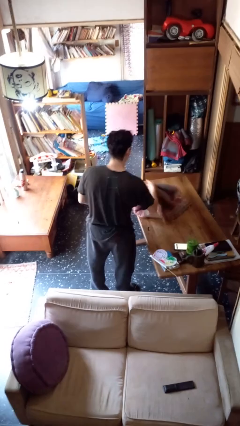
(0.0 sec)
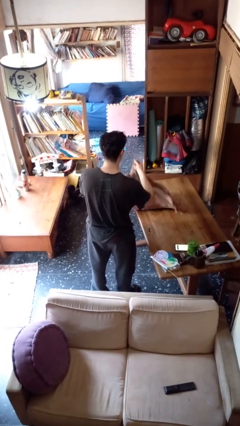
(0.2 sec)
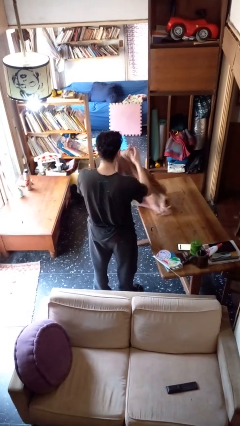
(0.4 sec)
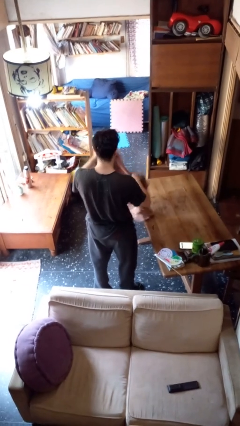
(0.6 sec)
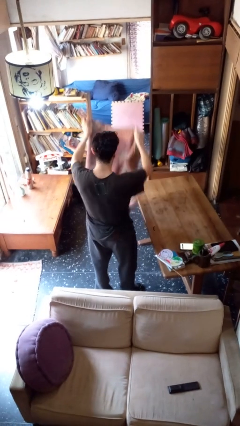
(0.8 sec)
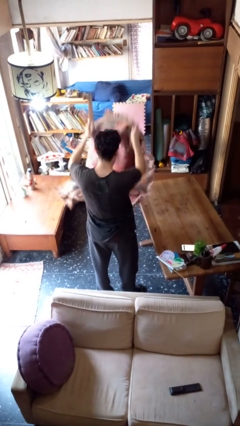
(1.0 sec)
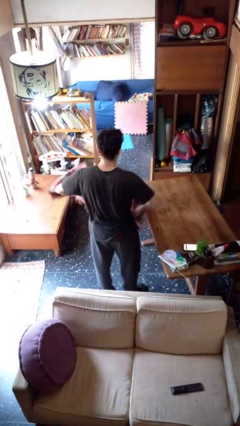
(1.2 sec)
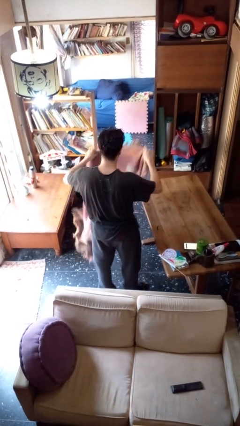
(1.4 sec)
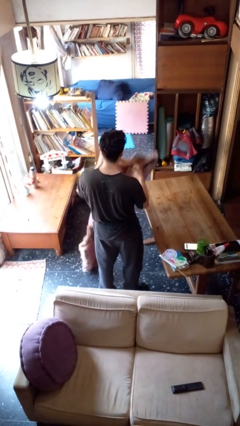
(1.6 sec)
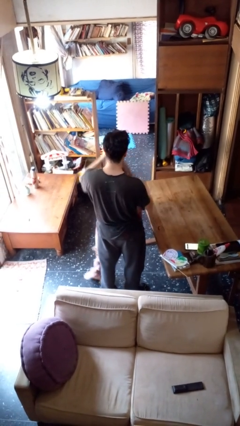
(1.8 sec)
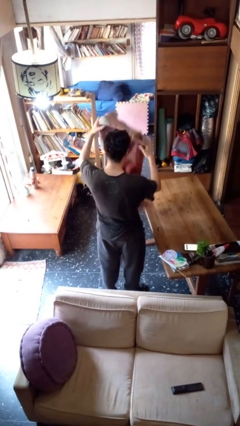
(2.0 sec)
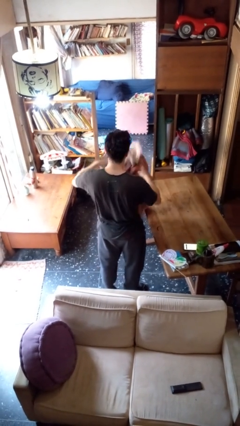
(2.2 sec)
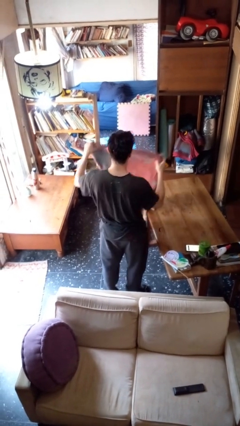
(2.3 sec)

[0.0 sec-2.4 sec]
person unfolds blanket

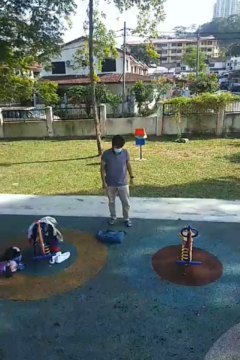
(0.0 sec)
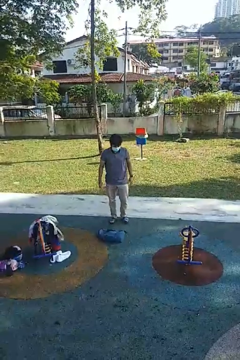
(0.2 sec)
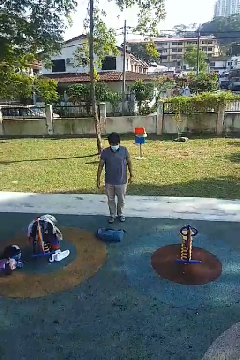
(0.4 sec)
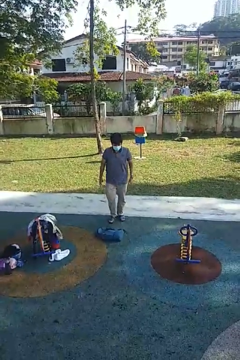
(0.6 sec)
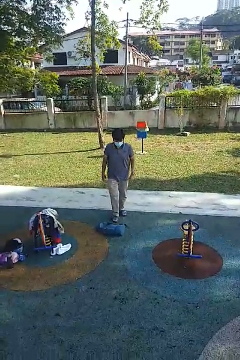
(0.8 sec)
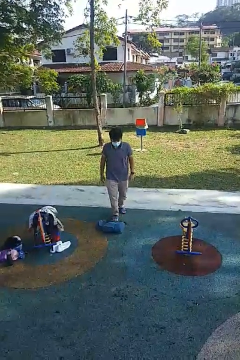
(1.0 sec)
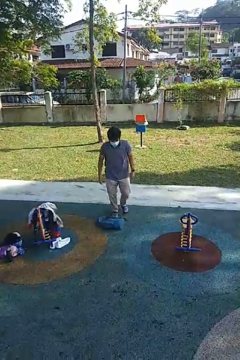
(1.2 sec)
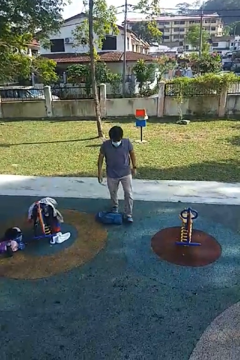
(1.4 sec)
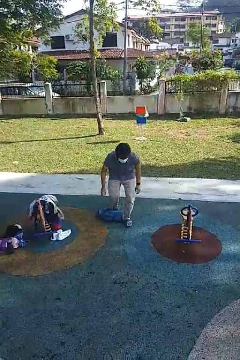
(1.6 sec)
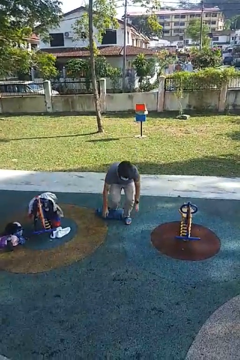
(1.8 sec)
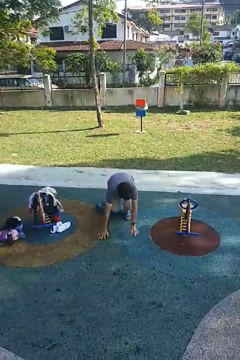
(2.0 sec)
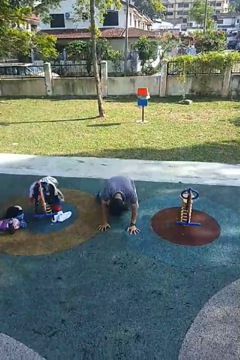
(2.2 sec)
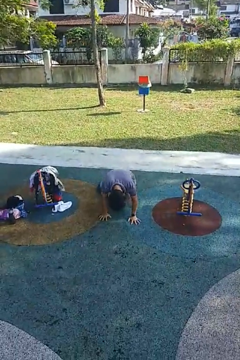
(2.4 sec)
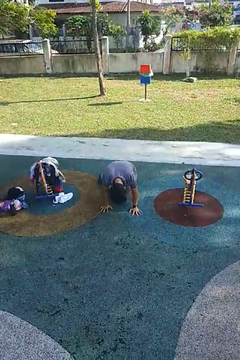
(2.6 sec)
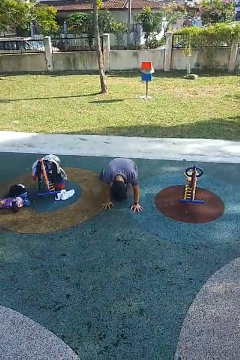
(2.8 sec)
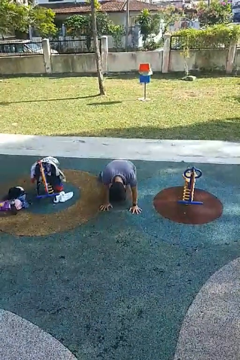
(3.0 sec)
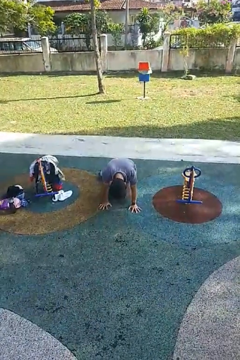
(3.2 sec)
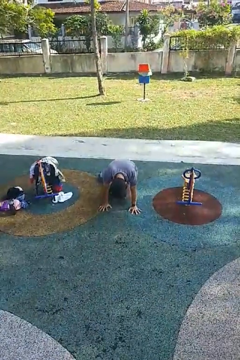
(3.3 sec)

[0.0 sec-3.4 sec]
person trips on object on floor

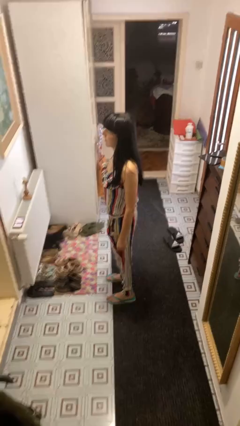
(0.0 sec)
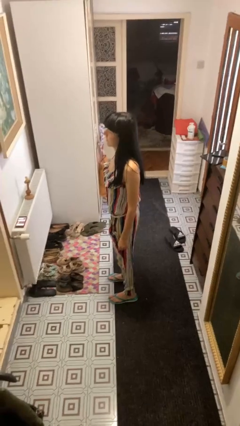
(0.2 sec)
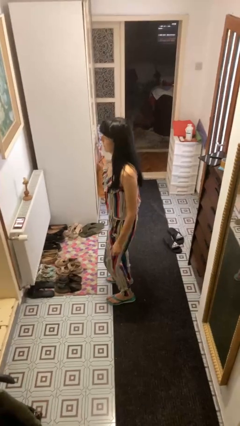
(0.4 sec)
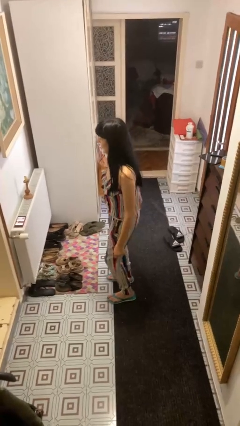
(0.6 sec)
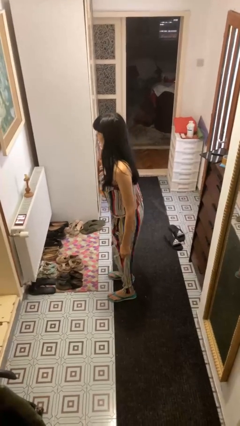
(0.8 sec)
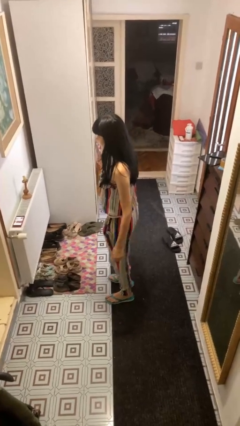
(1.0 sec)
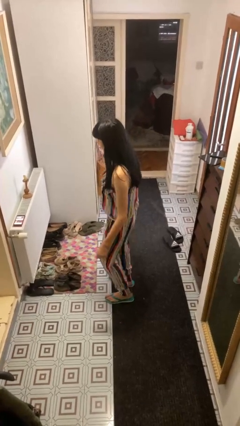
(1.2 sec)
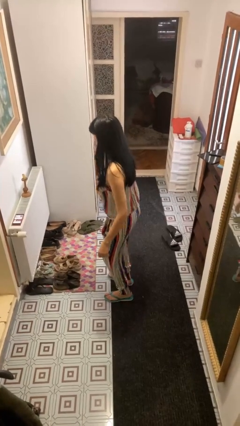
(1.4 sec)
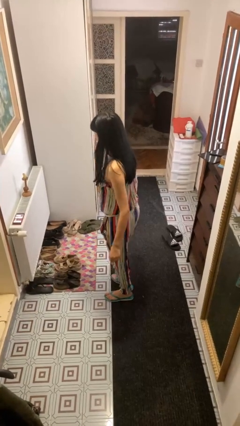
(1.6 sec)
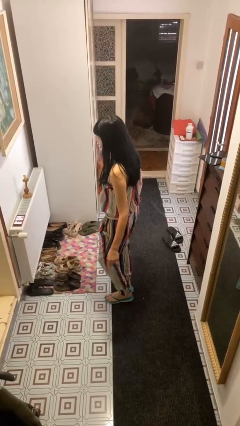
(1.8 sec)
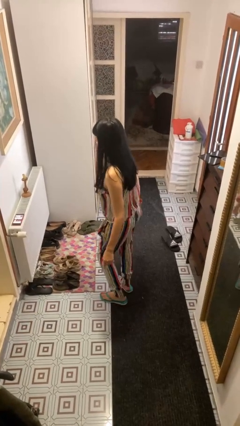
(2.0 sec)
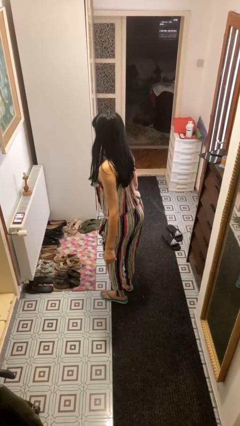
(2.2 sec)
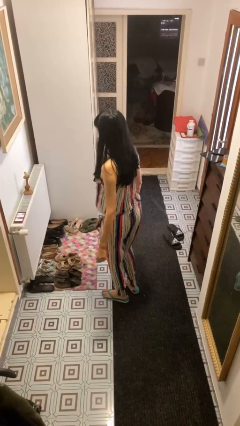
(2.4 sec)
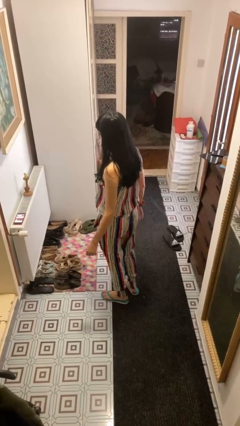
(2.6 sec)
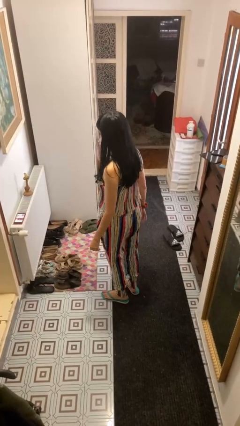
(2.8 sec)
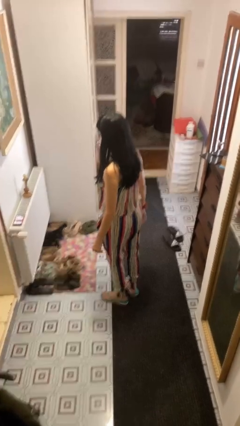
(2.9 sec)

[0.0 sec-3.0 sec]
person wiggles hips

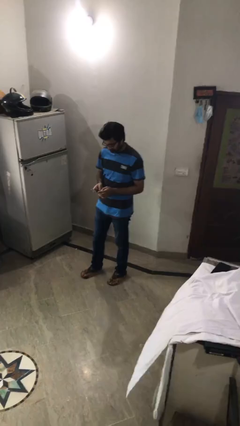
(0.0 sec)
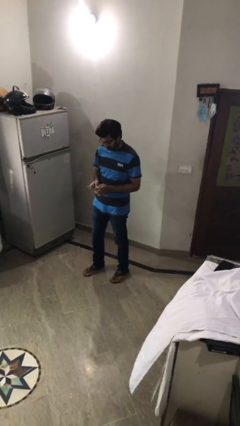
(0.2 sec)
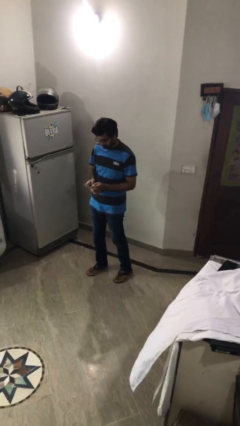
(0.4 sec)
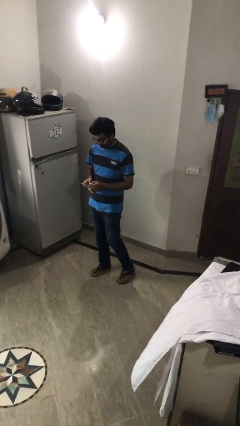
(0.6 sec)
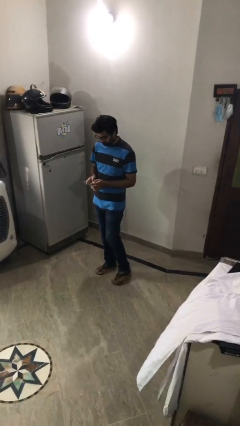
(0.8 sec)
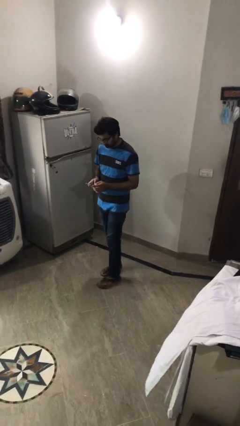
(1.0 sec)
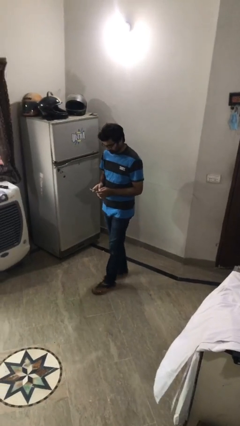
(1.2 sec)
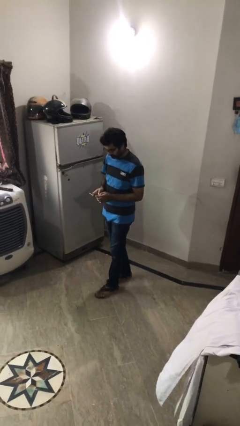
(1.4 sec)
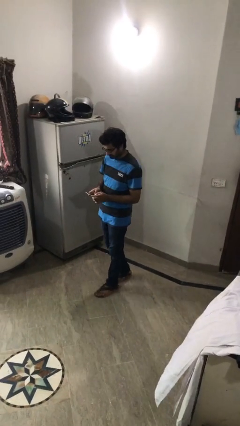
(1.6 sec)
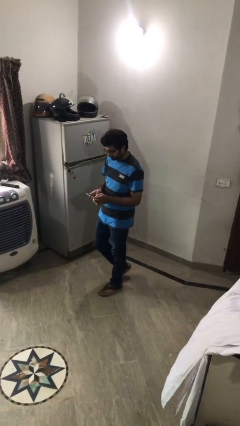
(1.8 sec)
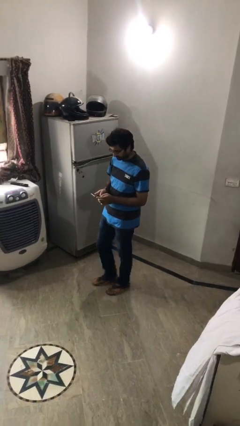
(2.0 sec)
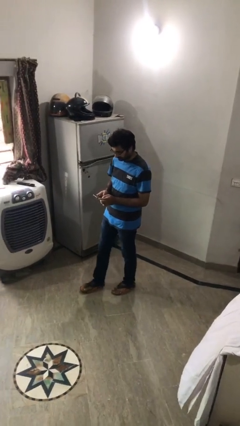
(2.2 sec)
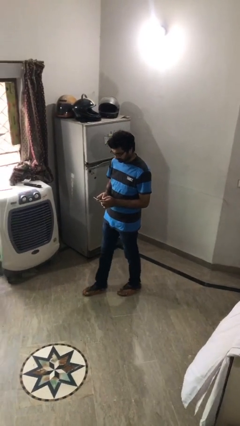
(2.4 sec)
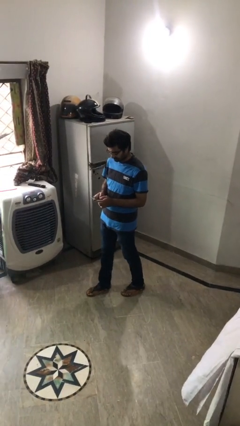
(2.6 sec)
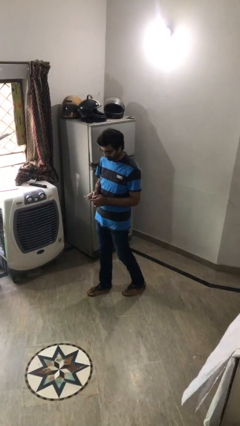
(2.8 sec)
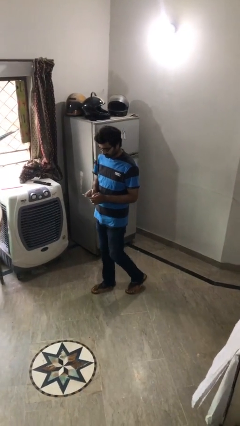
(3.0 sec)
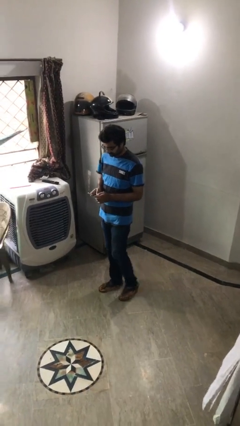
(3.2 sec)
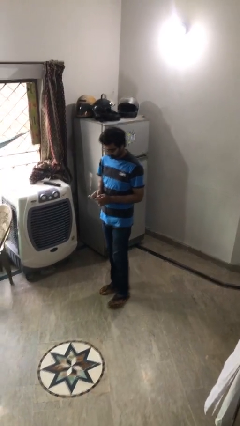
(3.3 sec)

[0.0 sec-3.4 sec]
person texts on phone

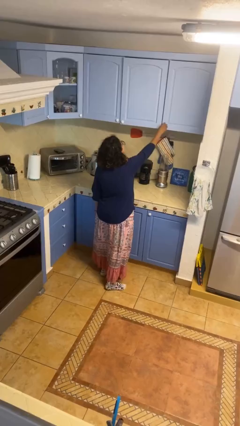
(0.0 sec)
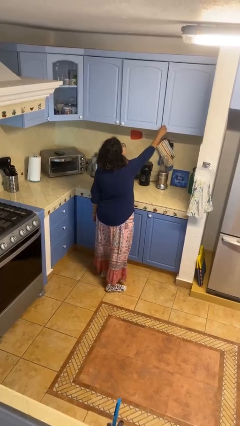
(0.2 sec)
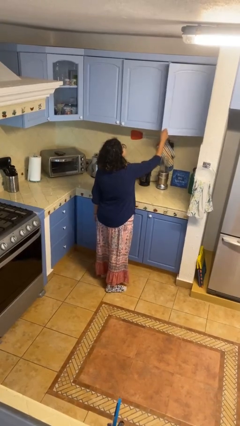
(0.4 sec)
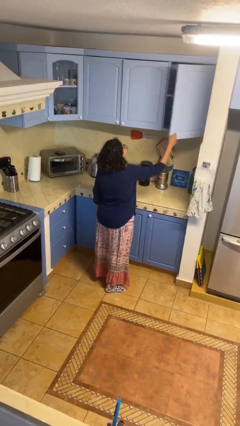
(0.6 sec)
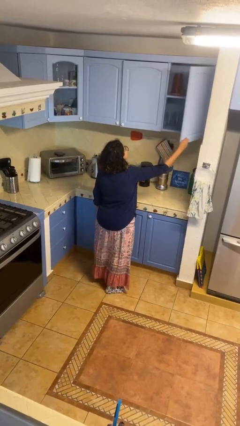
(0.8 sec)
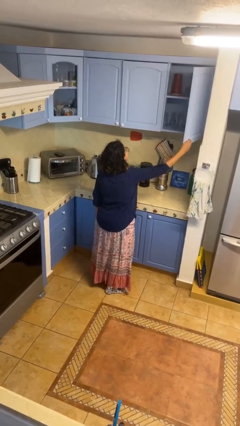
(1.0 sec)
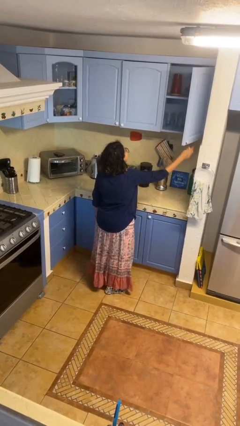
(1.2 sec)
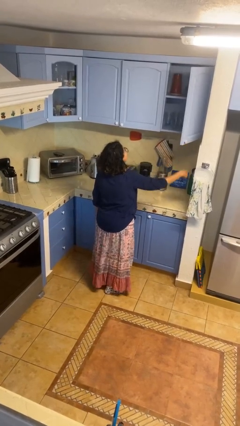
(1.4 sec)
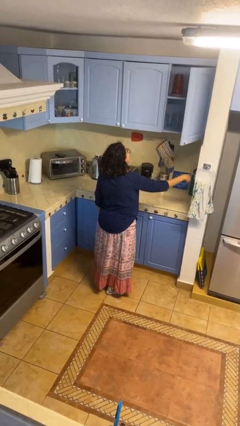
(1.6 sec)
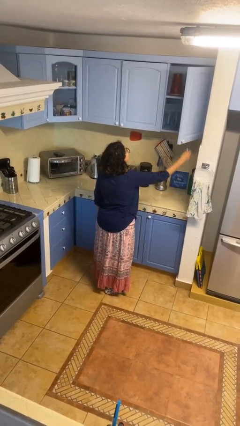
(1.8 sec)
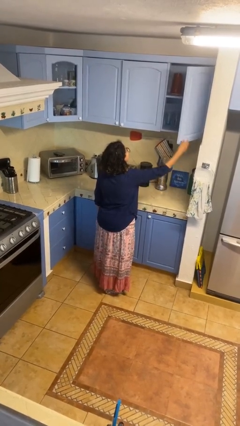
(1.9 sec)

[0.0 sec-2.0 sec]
person opens cabinet

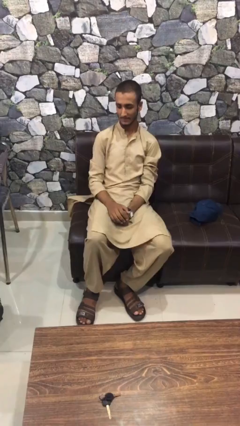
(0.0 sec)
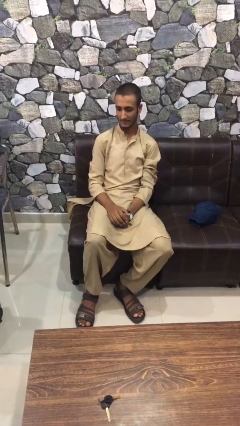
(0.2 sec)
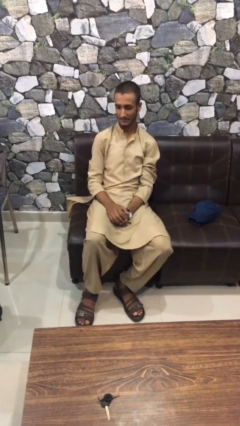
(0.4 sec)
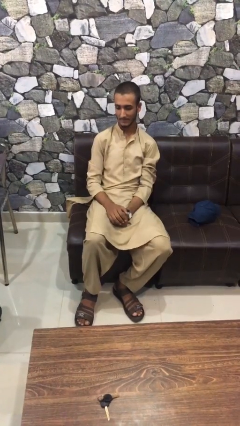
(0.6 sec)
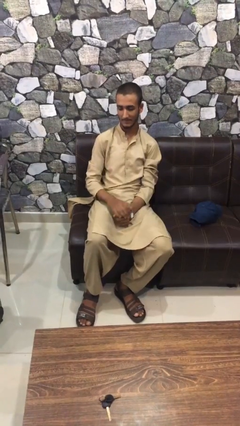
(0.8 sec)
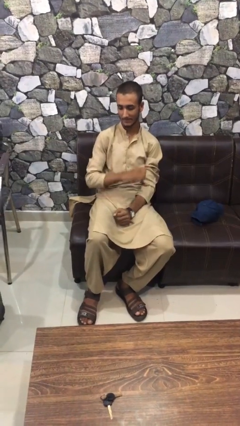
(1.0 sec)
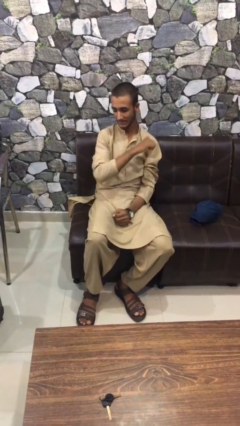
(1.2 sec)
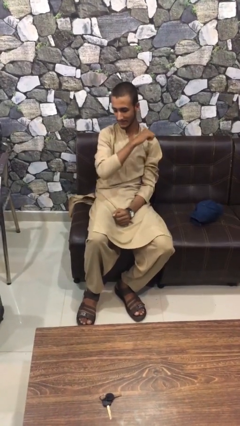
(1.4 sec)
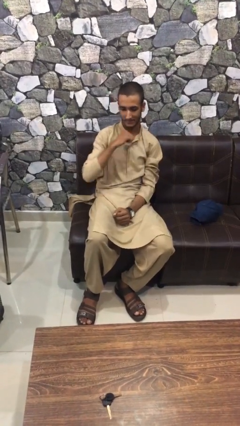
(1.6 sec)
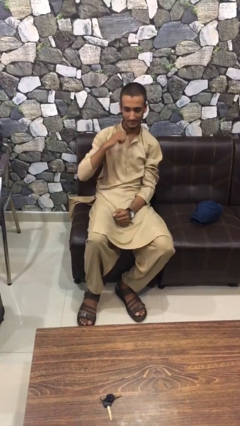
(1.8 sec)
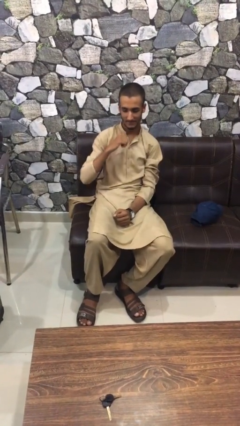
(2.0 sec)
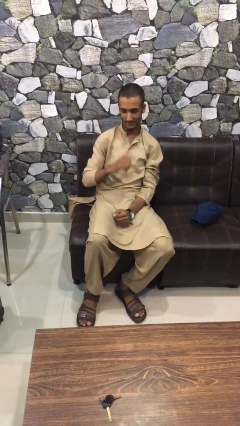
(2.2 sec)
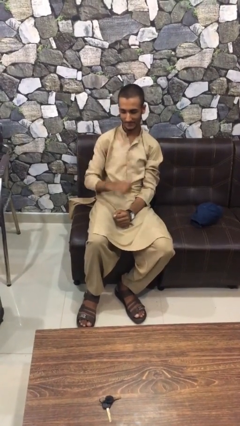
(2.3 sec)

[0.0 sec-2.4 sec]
person gestures cut

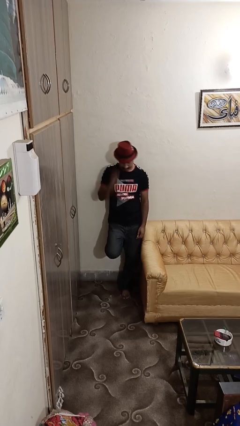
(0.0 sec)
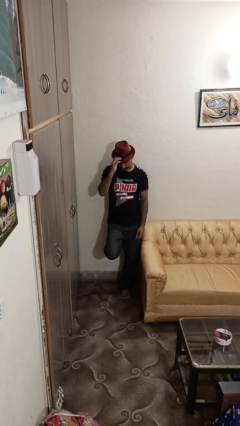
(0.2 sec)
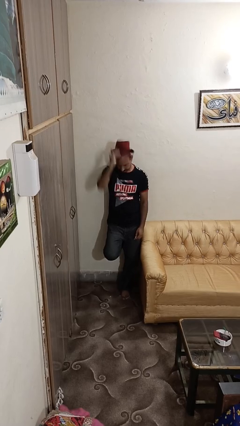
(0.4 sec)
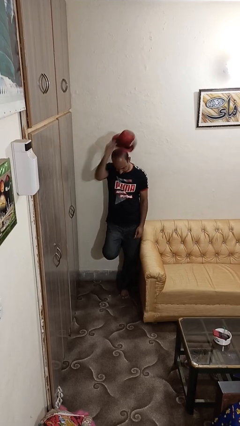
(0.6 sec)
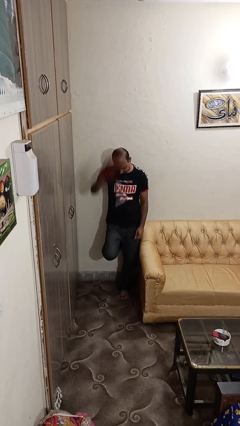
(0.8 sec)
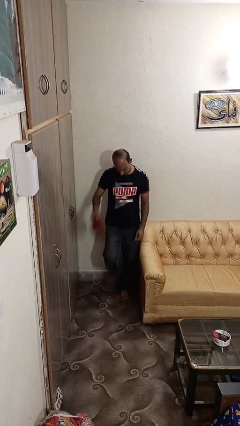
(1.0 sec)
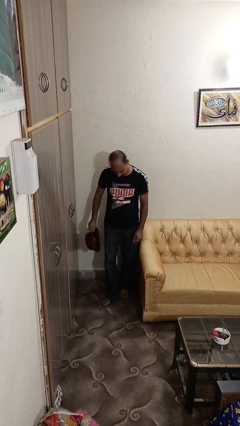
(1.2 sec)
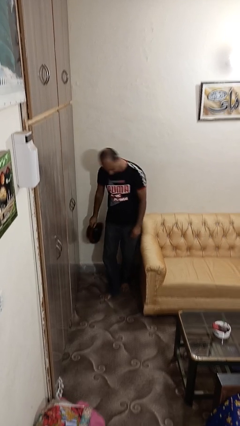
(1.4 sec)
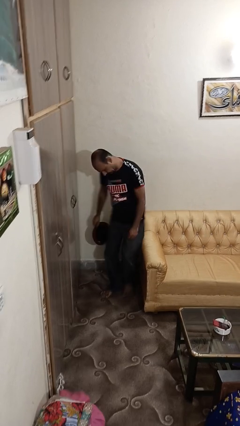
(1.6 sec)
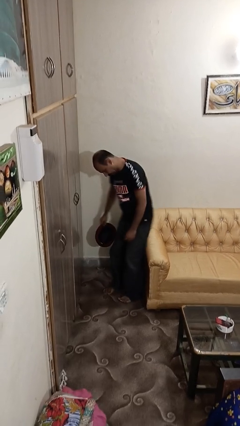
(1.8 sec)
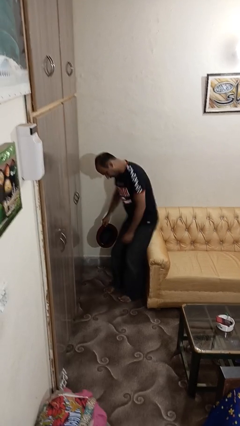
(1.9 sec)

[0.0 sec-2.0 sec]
person takes off hat
